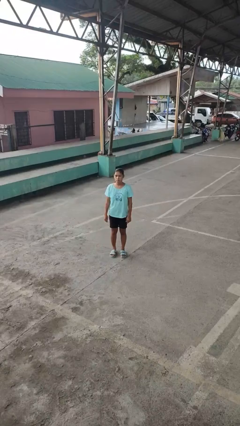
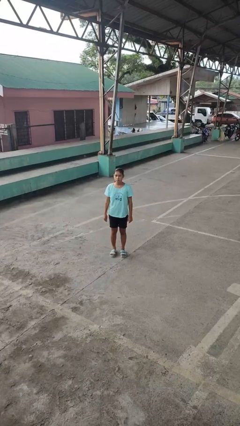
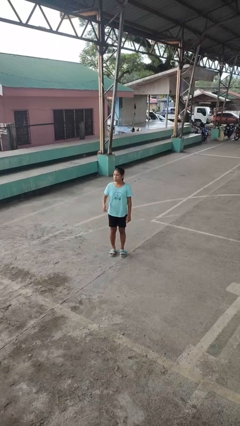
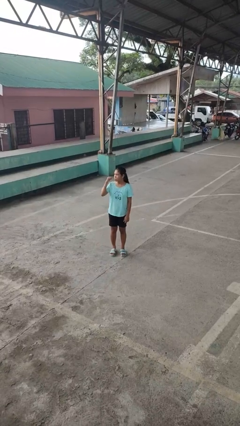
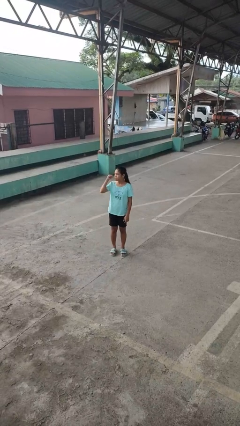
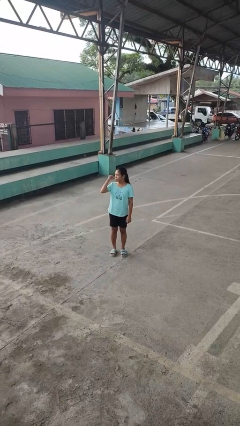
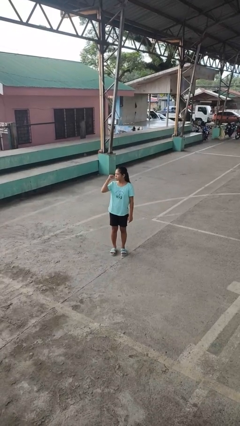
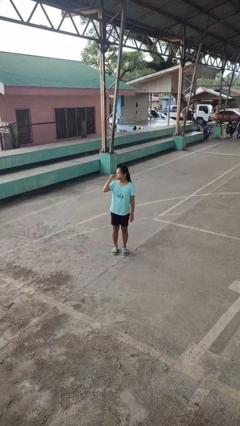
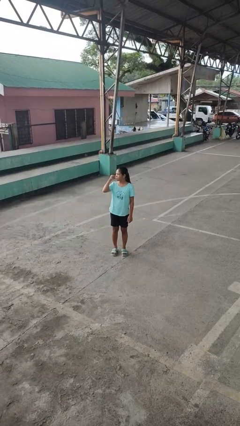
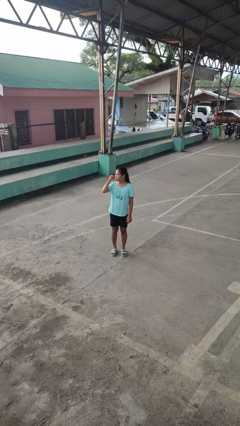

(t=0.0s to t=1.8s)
person gestures behind me

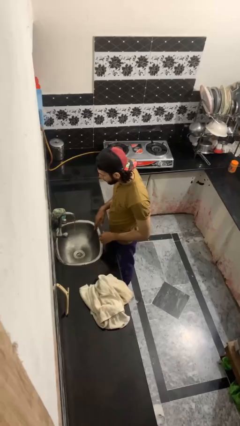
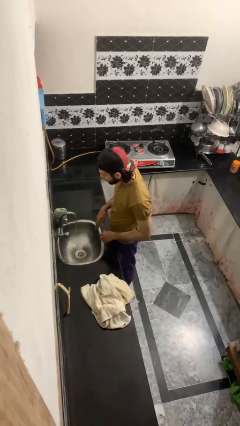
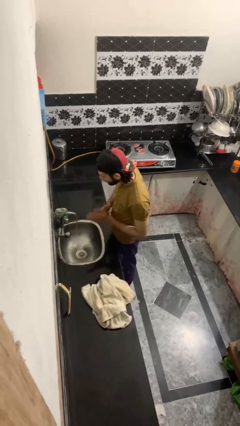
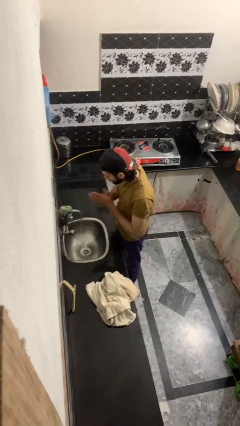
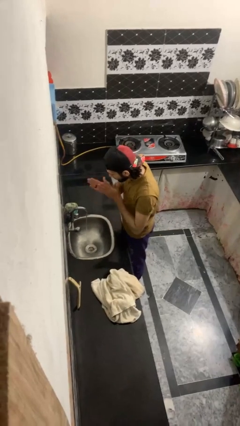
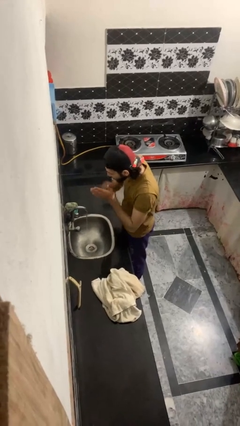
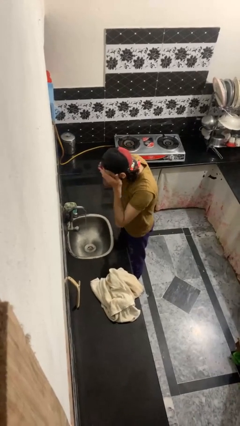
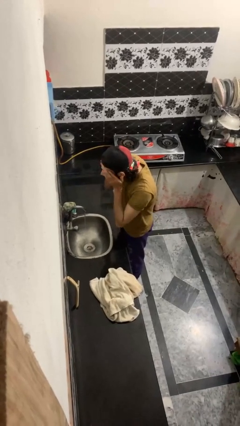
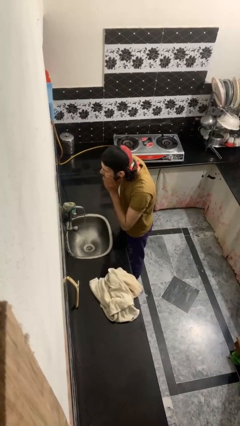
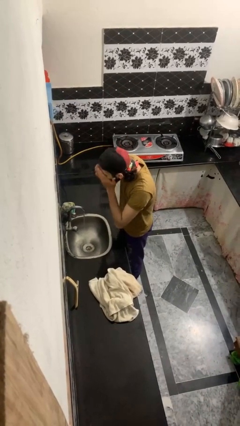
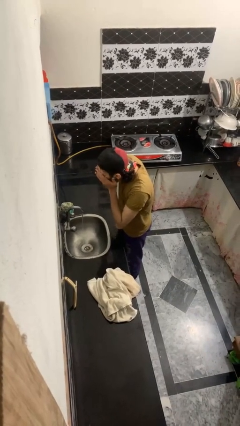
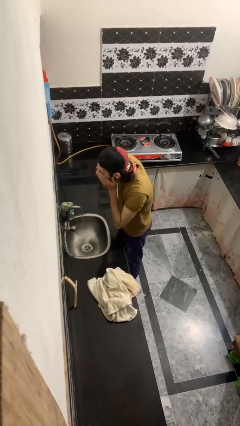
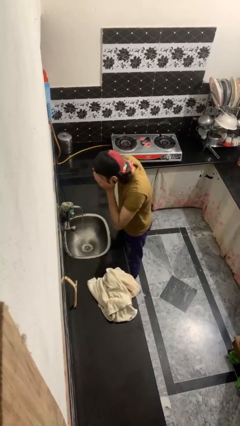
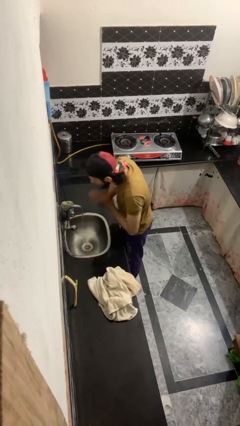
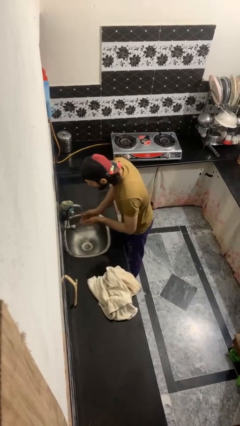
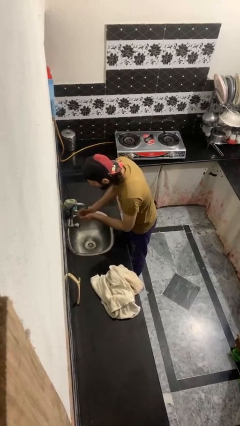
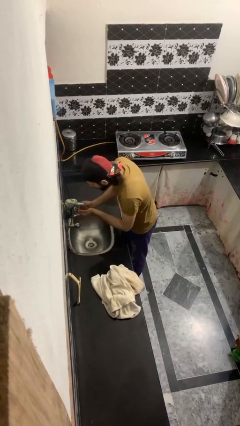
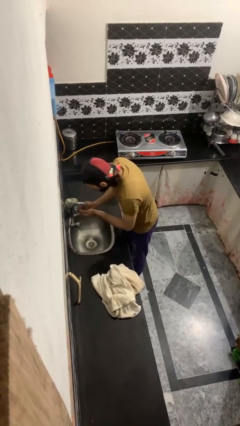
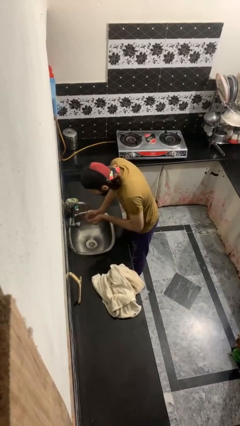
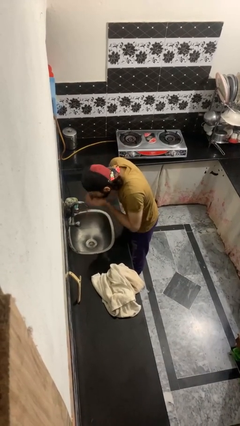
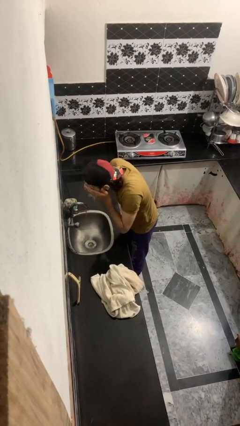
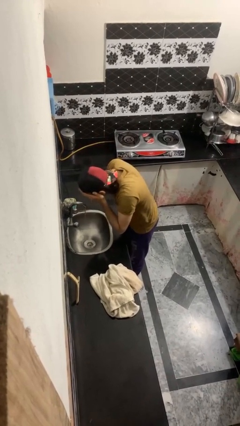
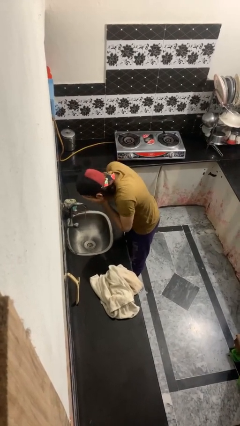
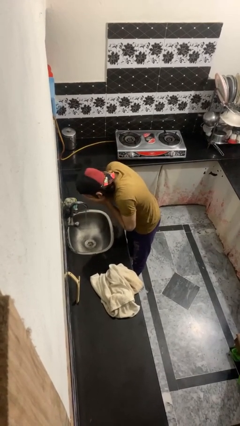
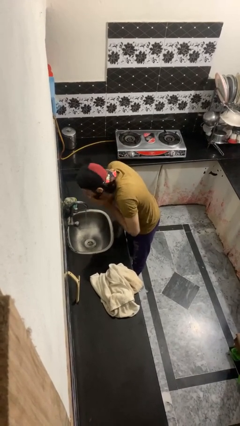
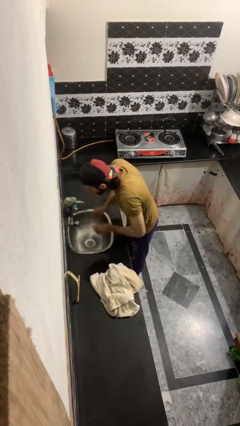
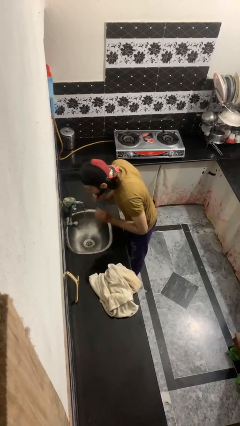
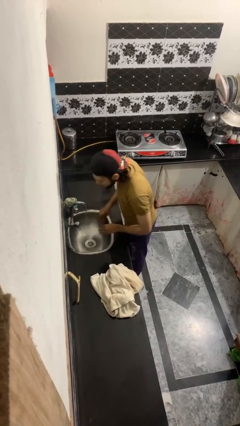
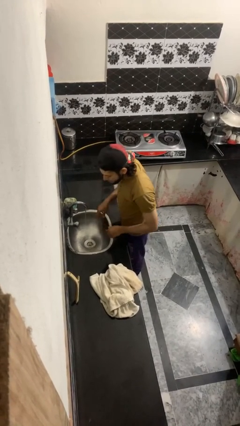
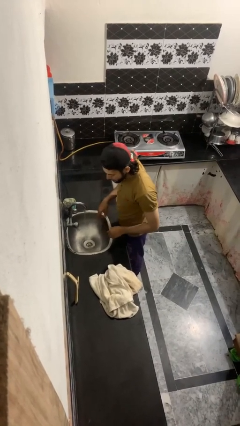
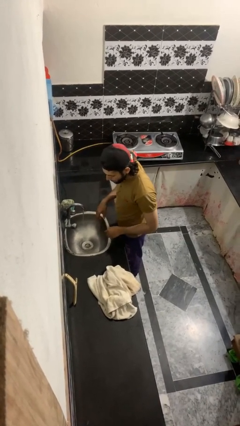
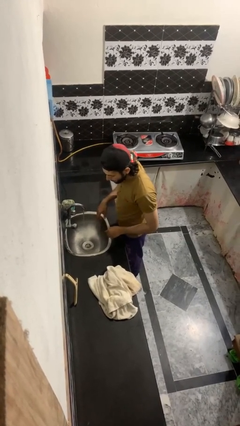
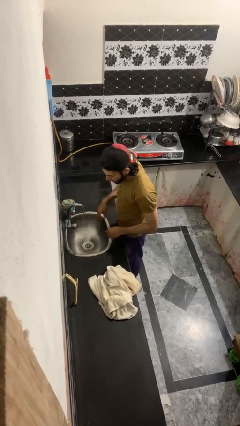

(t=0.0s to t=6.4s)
person washes face

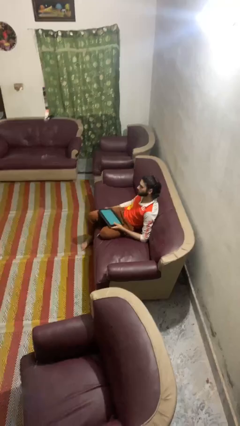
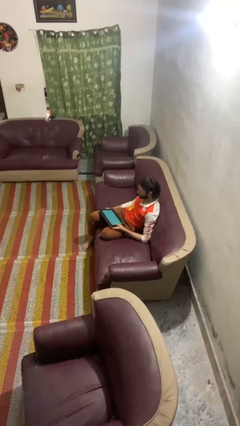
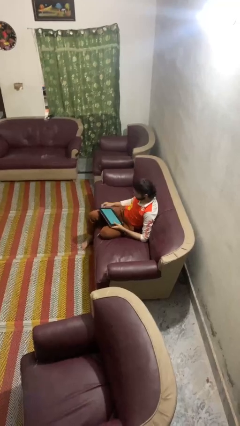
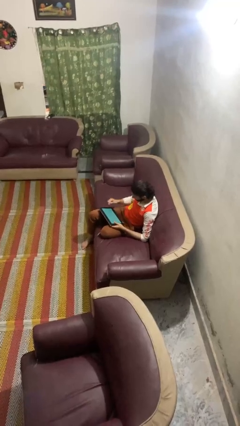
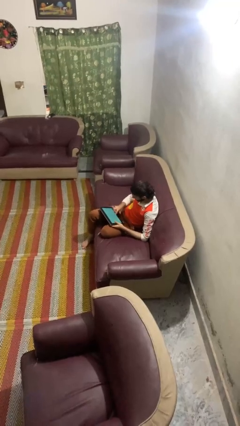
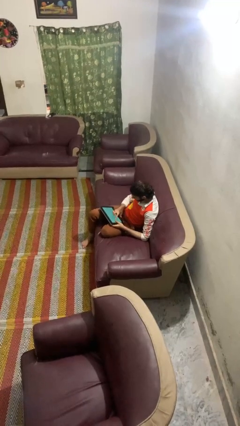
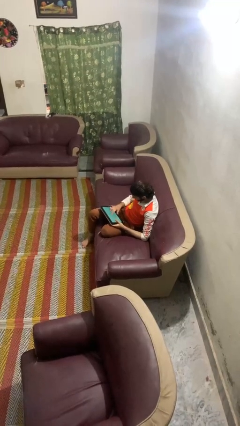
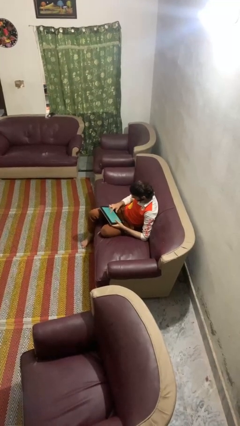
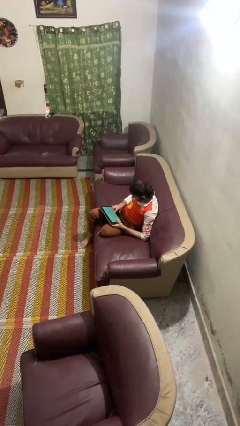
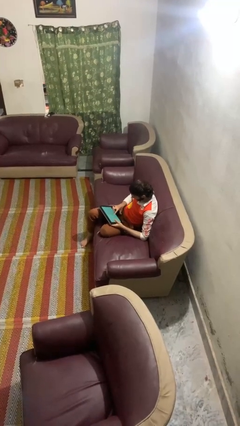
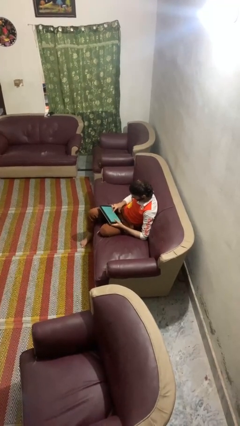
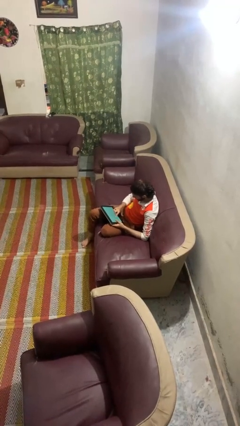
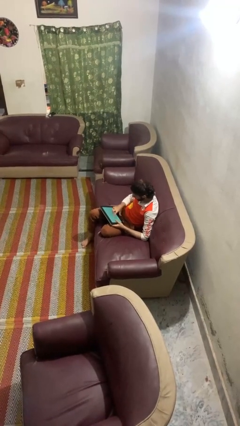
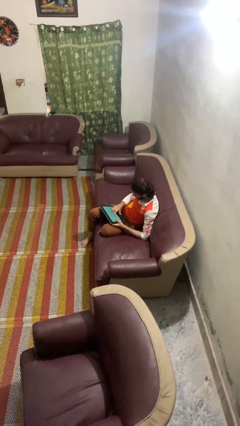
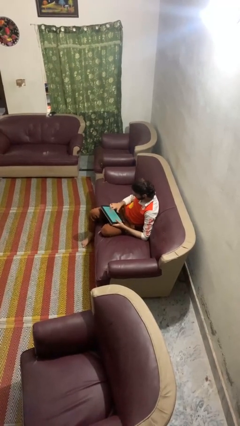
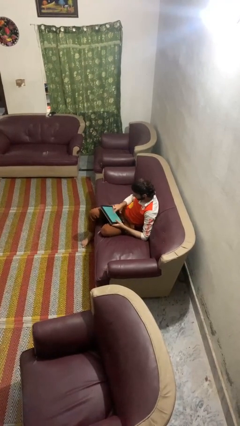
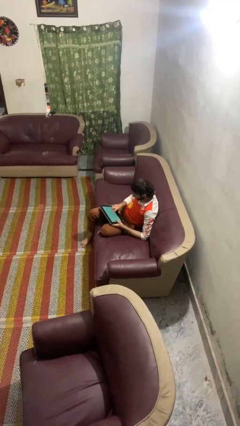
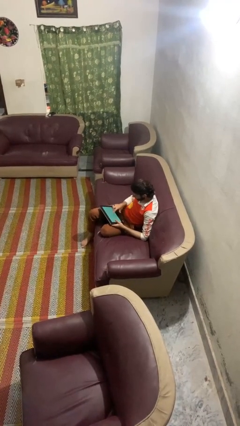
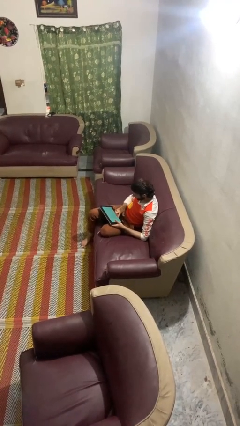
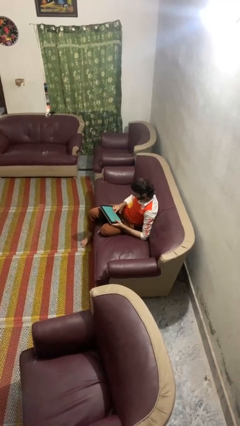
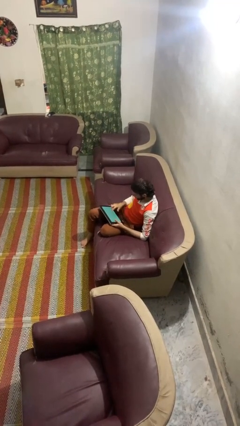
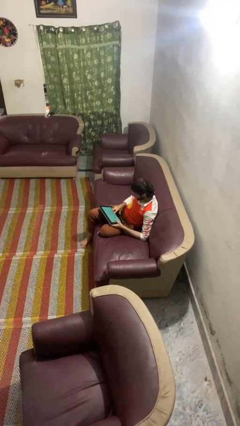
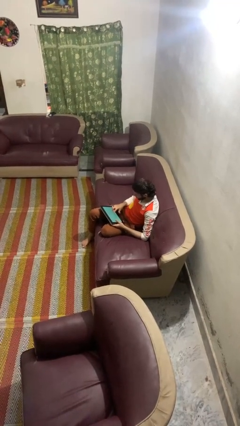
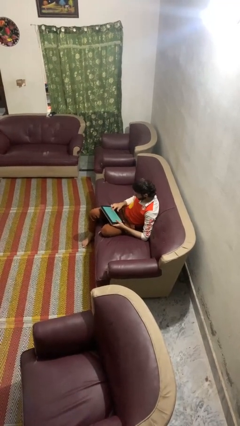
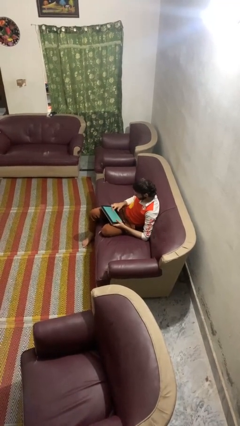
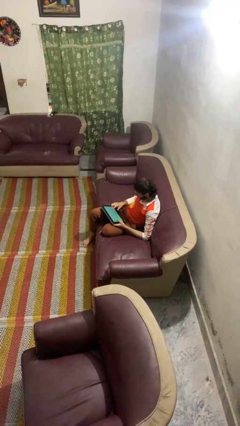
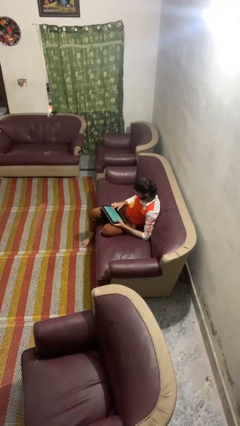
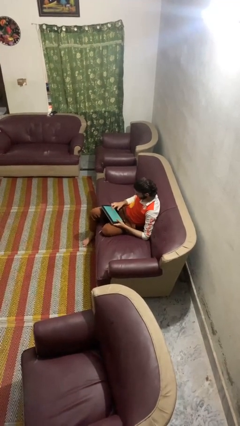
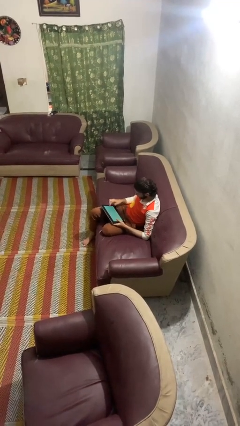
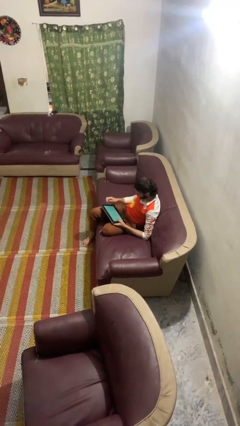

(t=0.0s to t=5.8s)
person interacts with tablet

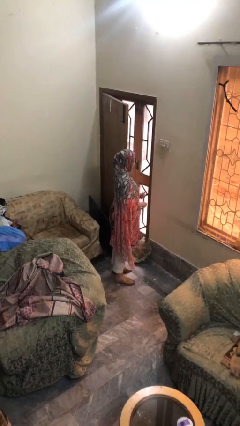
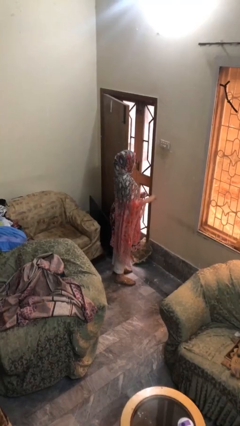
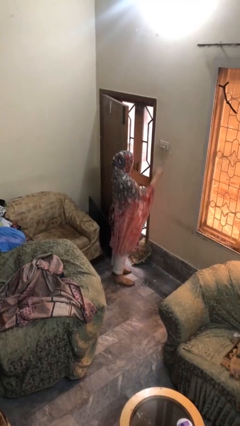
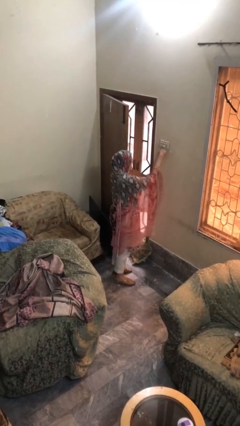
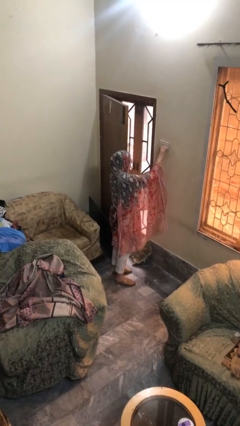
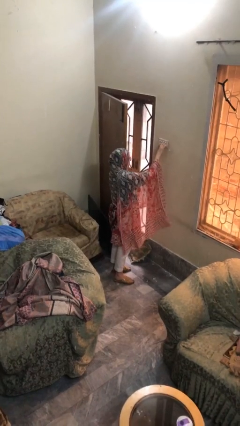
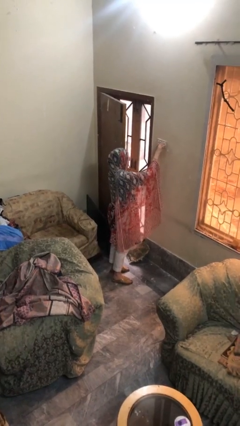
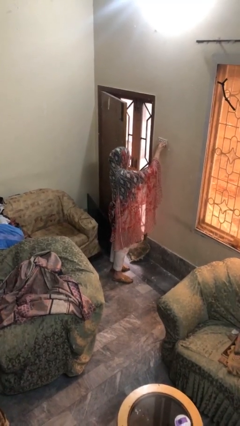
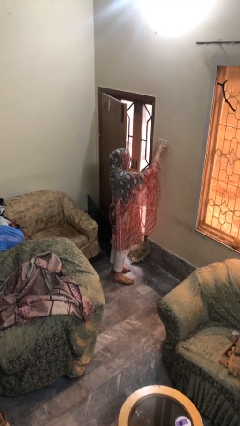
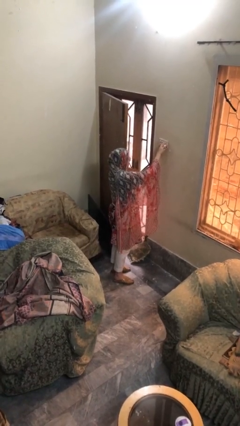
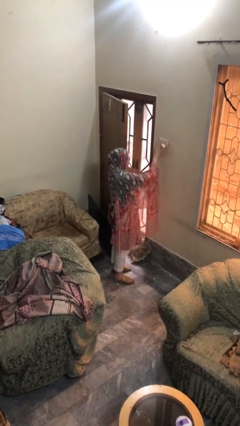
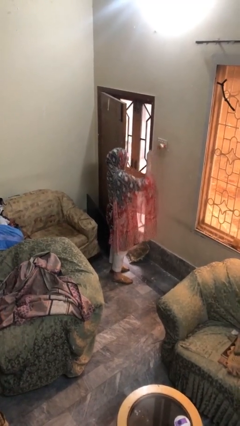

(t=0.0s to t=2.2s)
person plugs into electrical socket

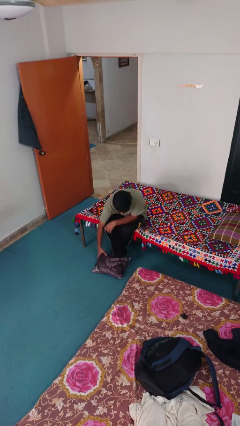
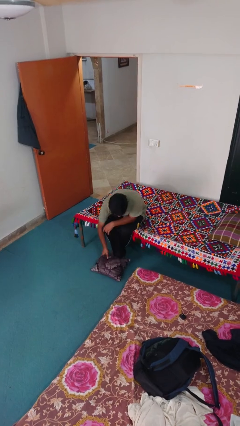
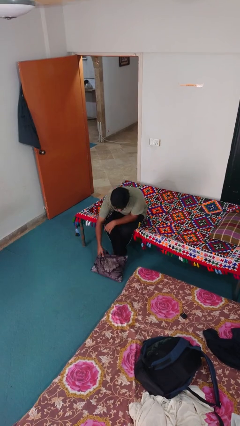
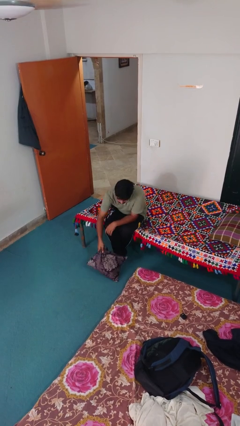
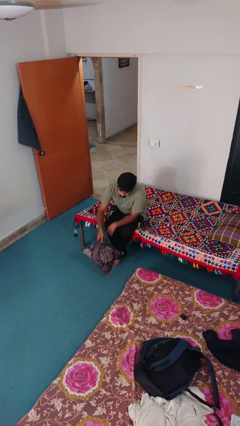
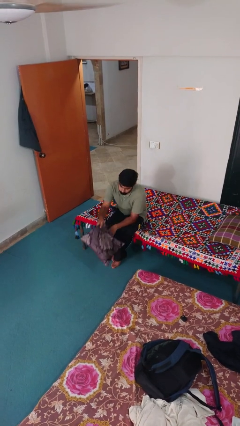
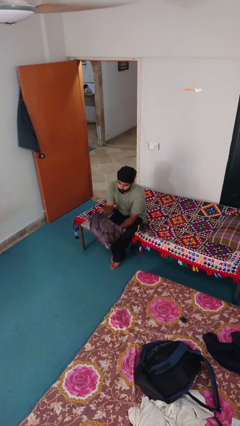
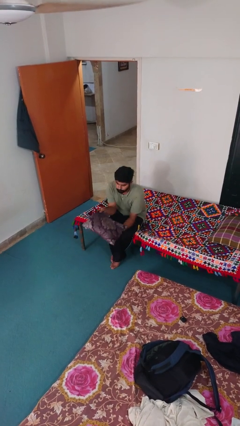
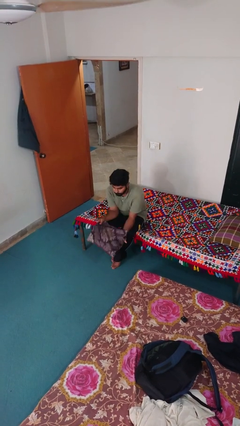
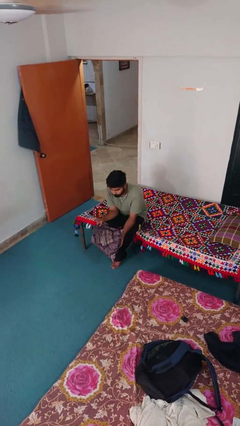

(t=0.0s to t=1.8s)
person picks up object from floor
